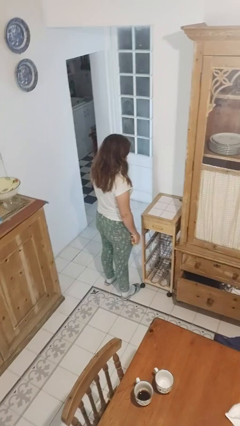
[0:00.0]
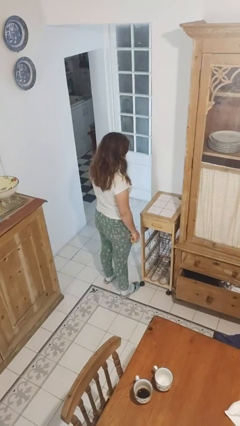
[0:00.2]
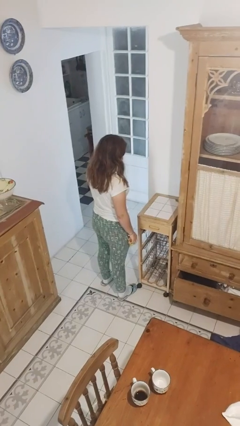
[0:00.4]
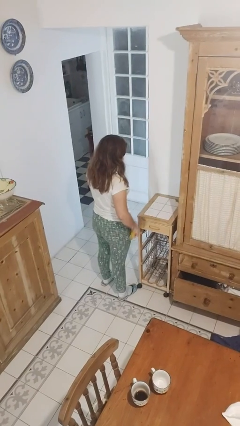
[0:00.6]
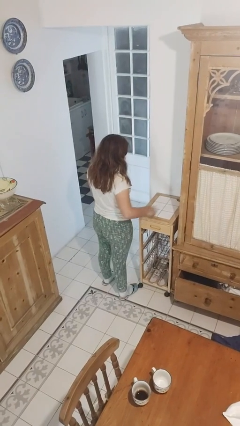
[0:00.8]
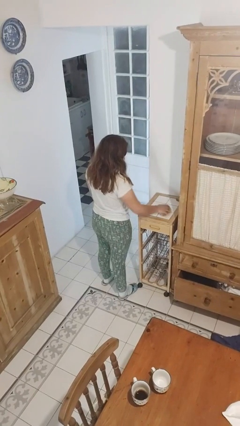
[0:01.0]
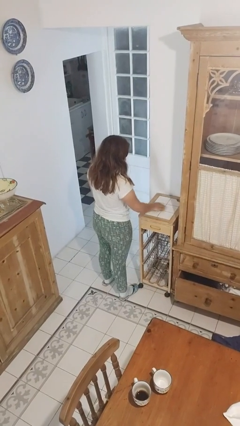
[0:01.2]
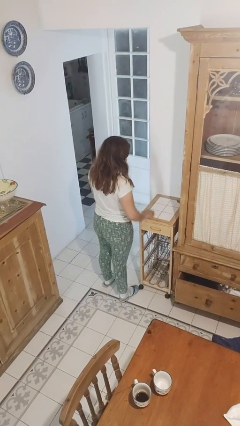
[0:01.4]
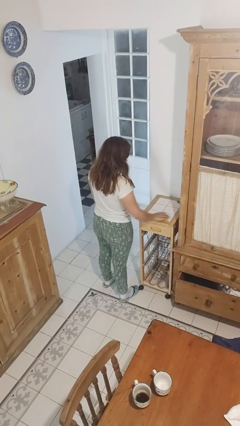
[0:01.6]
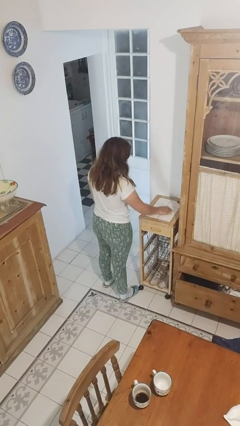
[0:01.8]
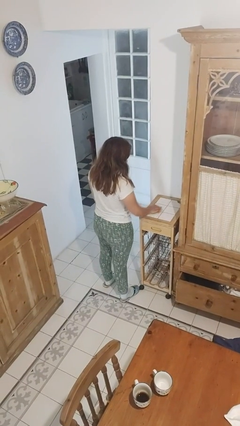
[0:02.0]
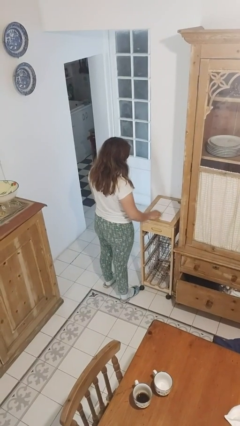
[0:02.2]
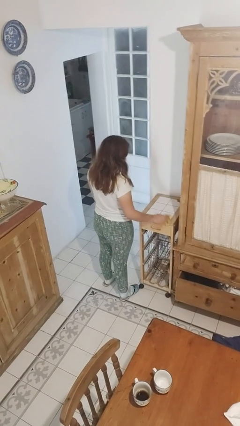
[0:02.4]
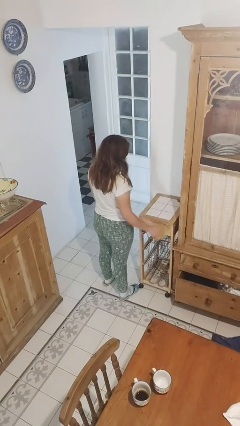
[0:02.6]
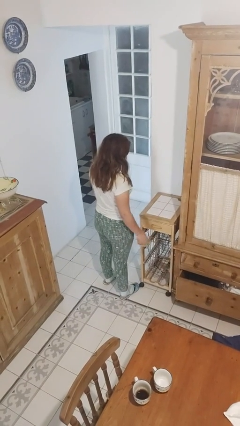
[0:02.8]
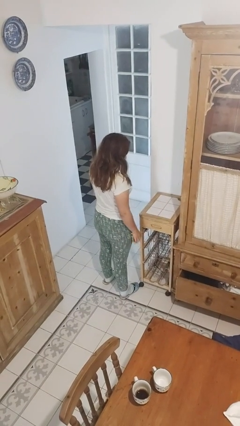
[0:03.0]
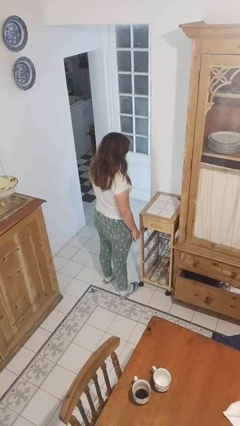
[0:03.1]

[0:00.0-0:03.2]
person cleans table with rag

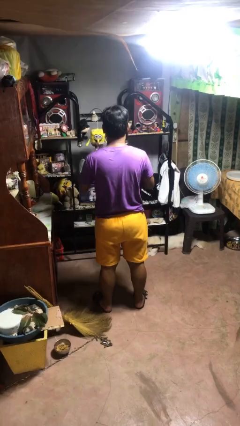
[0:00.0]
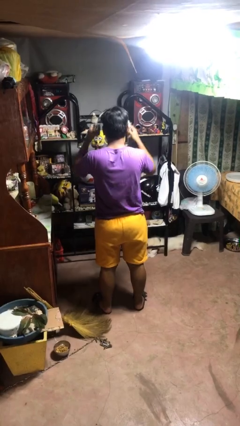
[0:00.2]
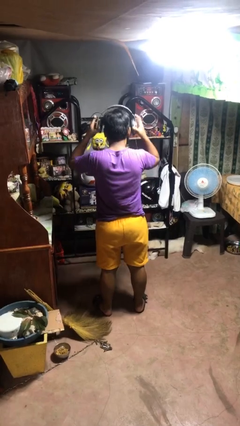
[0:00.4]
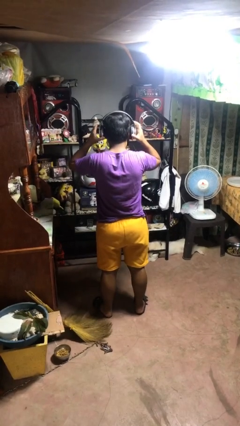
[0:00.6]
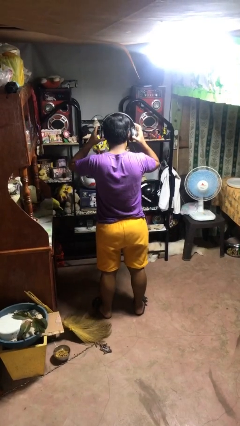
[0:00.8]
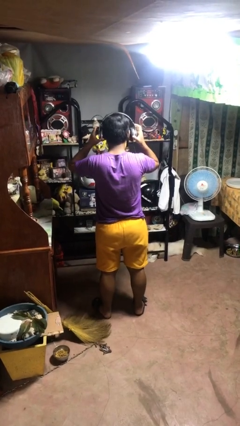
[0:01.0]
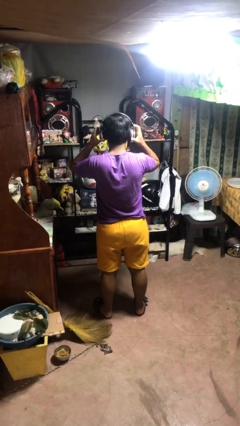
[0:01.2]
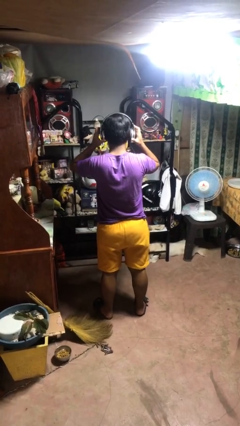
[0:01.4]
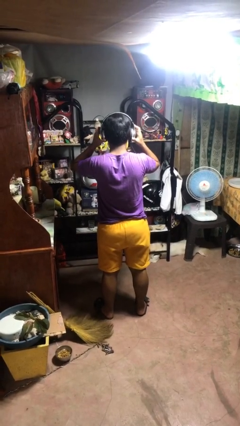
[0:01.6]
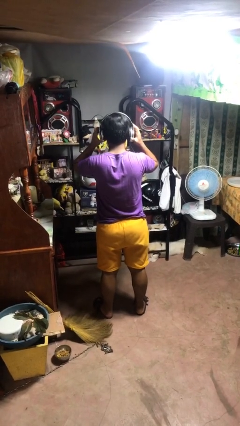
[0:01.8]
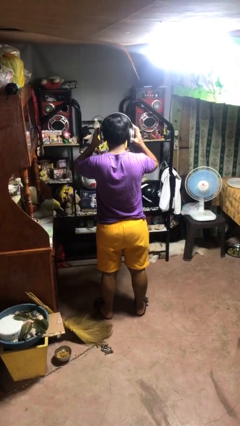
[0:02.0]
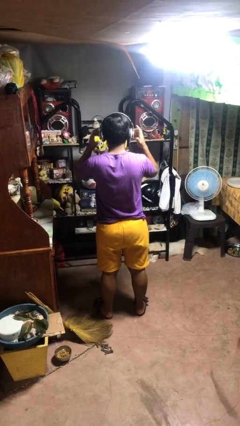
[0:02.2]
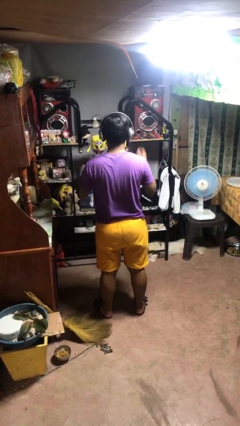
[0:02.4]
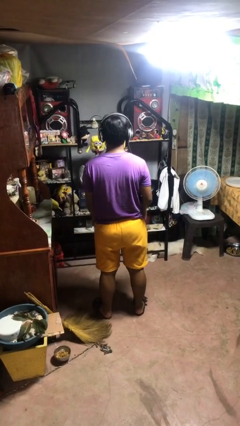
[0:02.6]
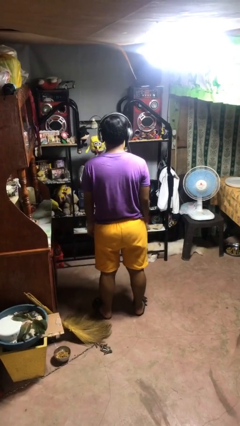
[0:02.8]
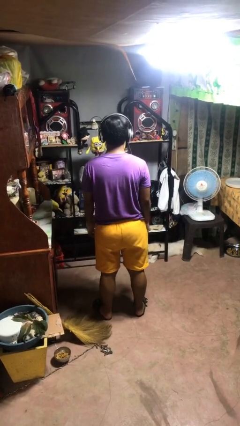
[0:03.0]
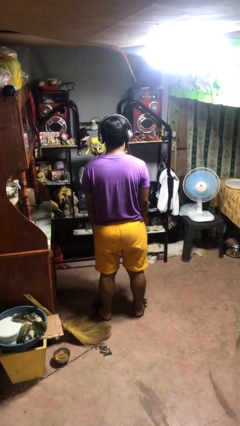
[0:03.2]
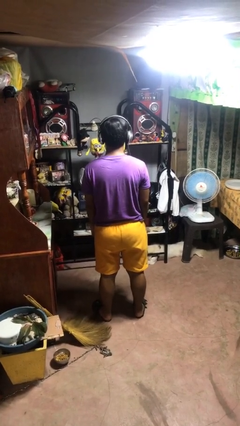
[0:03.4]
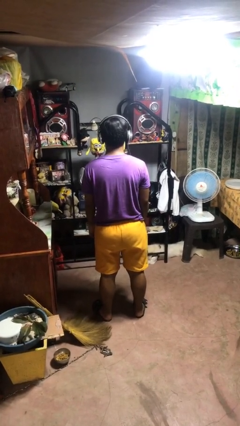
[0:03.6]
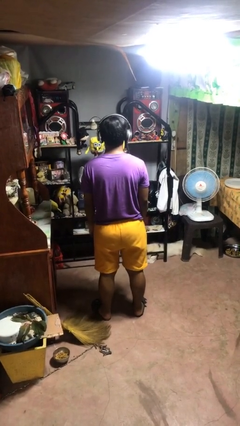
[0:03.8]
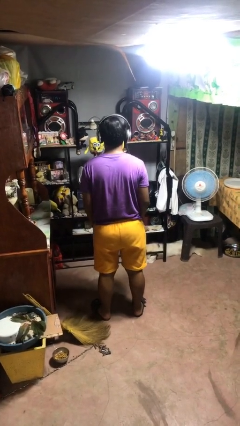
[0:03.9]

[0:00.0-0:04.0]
person puts on headphones

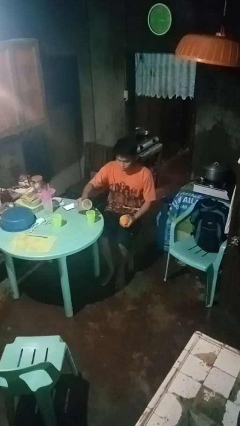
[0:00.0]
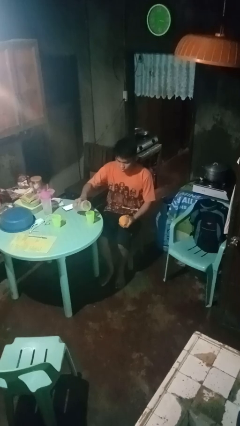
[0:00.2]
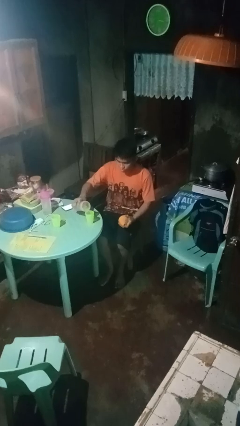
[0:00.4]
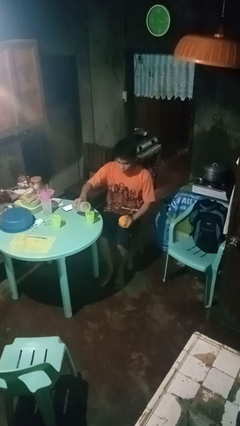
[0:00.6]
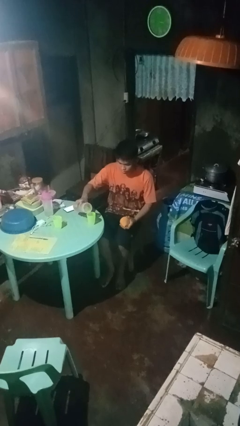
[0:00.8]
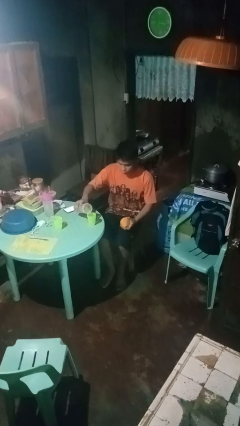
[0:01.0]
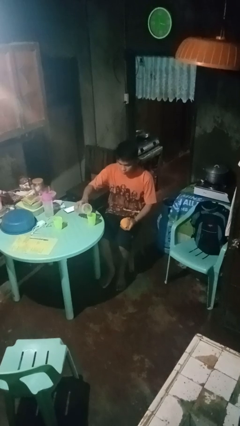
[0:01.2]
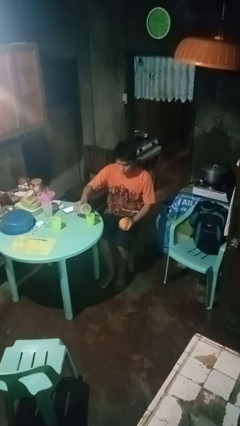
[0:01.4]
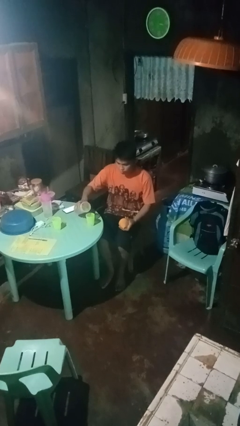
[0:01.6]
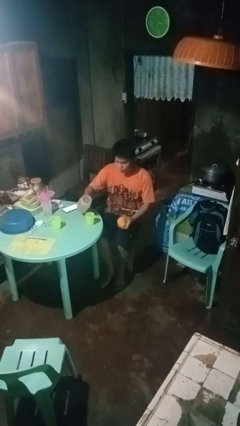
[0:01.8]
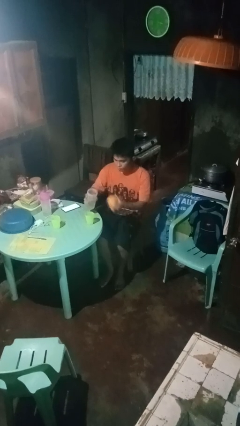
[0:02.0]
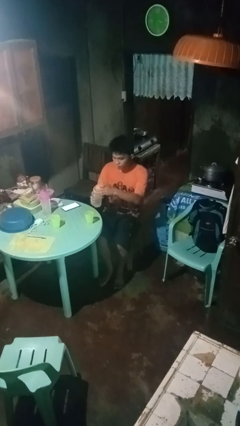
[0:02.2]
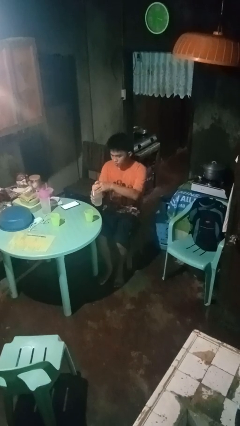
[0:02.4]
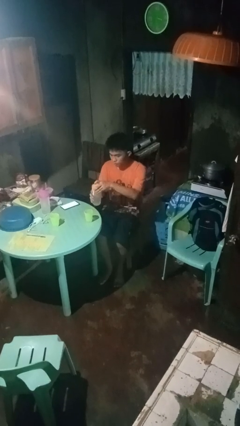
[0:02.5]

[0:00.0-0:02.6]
person pours liquid into cup

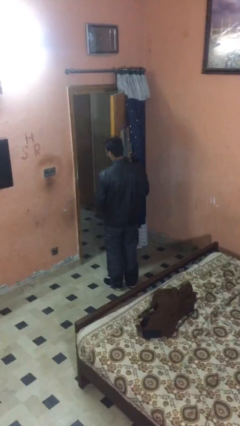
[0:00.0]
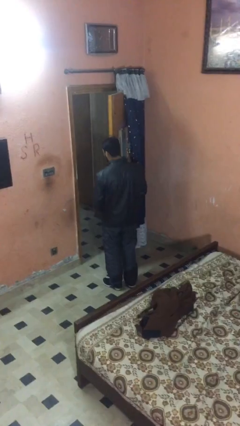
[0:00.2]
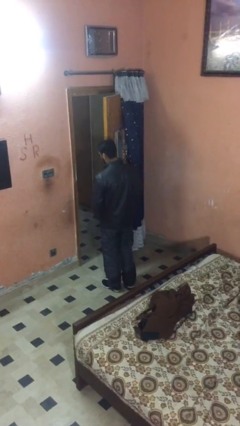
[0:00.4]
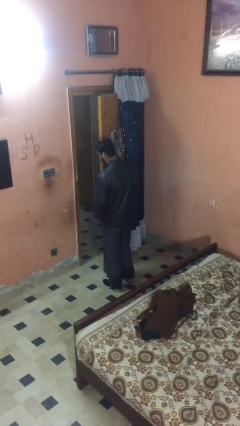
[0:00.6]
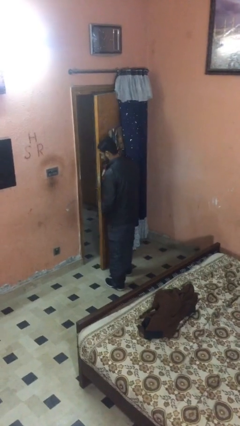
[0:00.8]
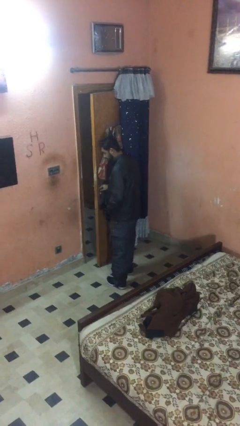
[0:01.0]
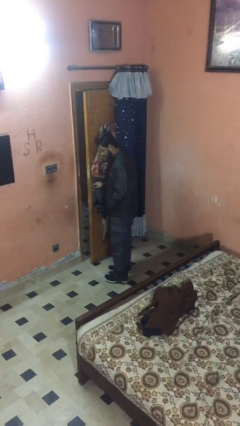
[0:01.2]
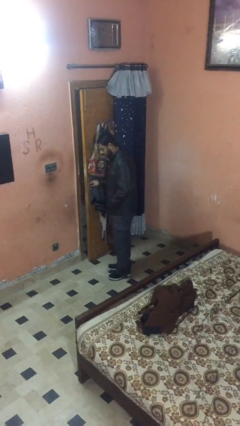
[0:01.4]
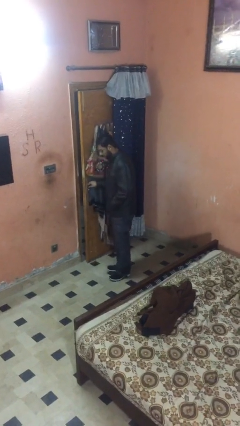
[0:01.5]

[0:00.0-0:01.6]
person closes facility door

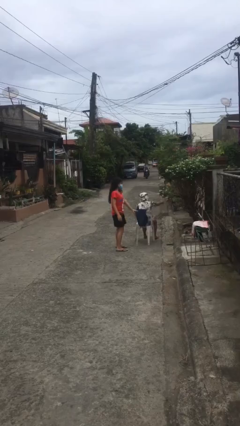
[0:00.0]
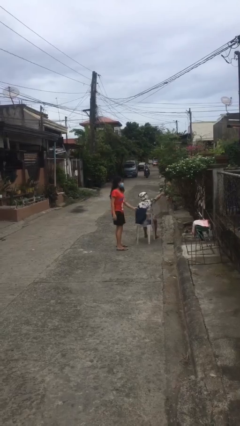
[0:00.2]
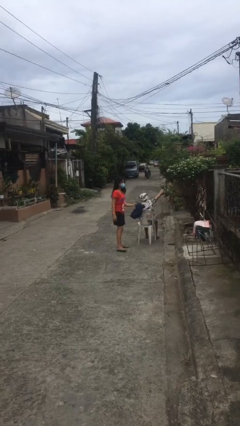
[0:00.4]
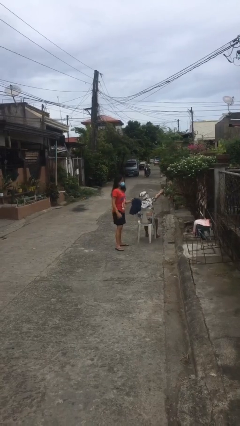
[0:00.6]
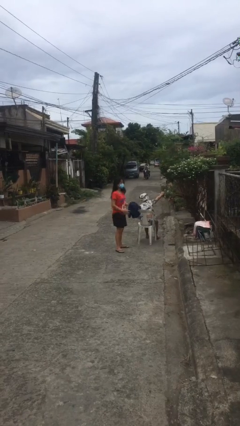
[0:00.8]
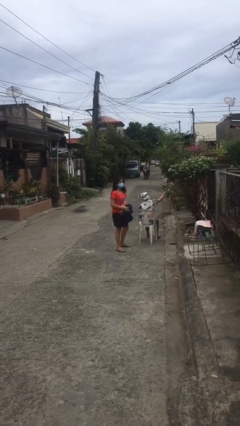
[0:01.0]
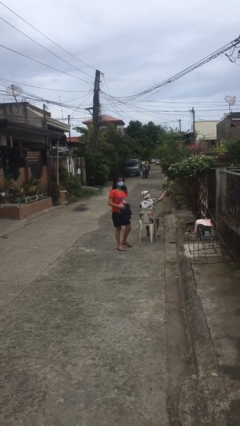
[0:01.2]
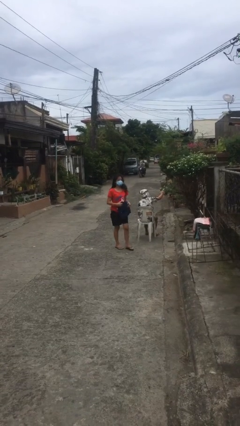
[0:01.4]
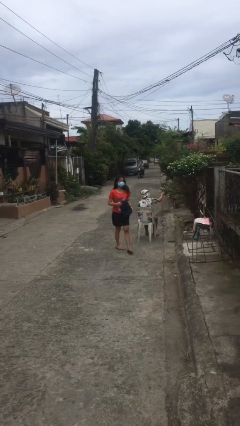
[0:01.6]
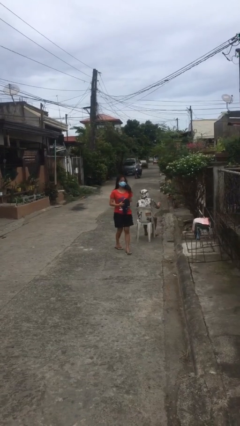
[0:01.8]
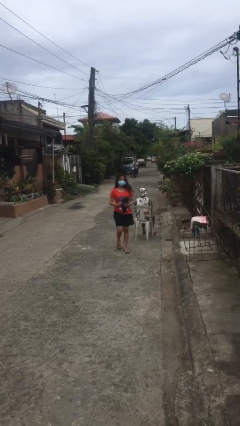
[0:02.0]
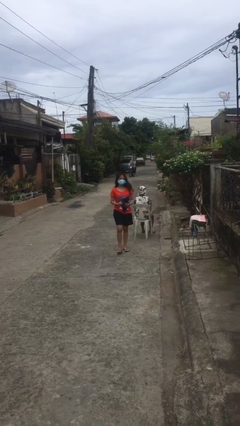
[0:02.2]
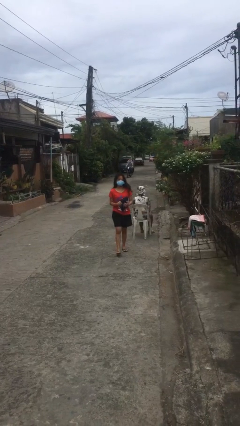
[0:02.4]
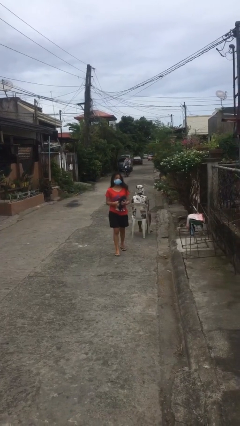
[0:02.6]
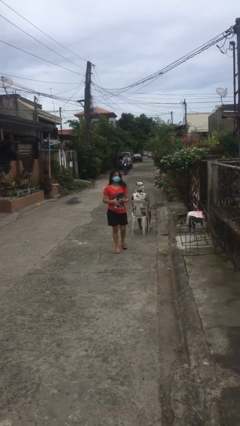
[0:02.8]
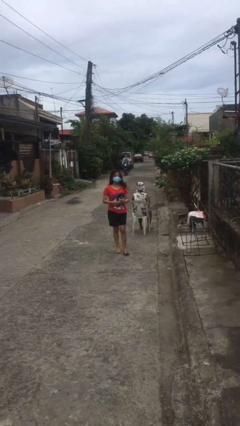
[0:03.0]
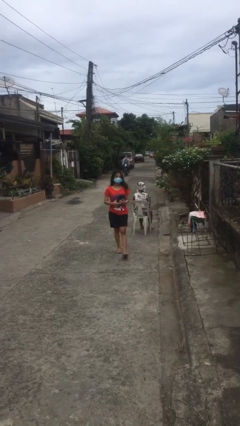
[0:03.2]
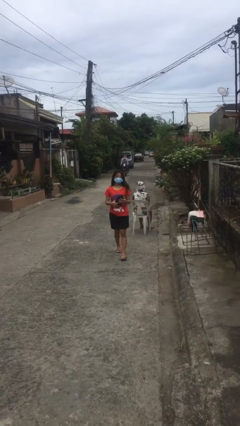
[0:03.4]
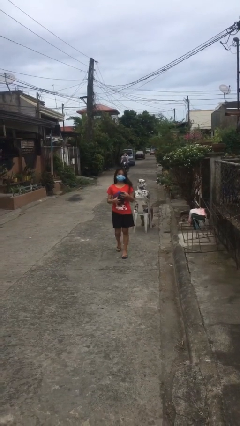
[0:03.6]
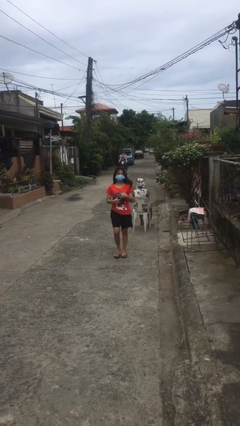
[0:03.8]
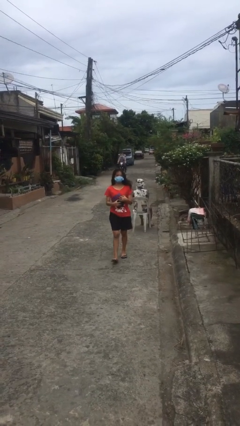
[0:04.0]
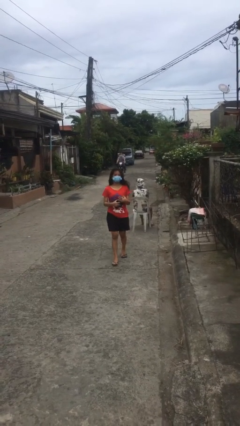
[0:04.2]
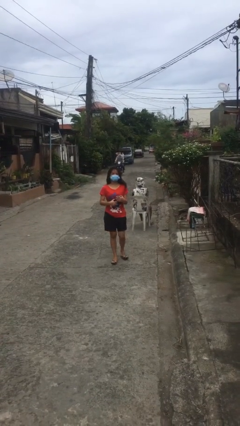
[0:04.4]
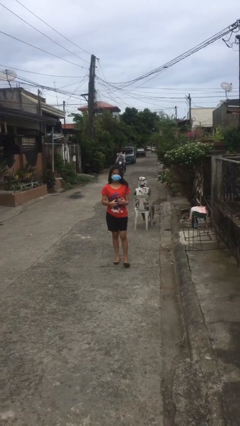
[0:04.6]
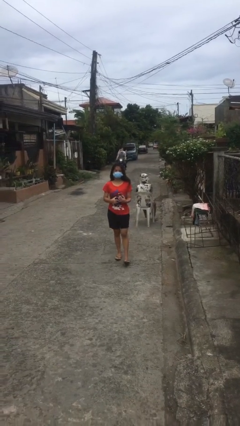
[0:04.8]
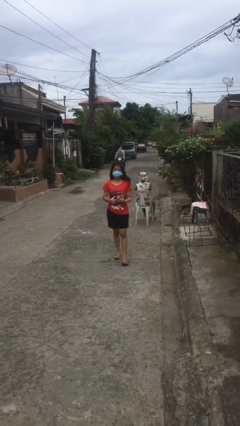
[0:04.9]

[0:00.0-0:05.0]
person steals object from person

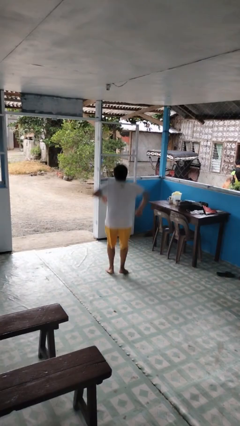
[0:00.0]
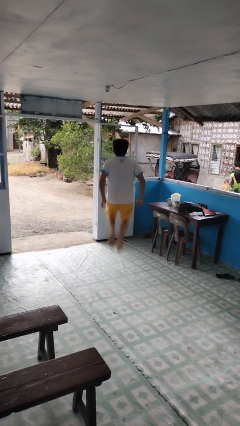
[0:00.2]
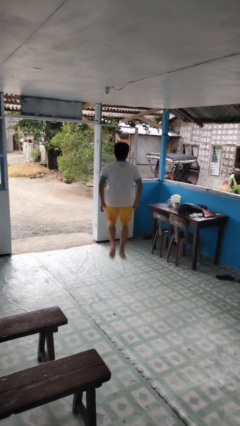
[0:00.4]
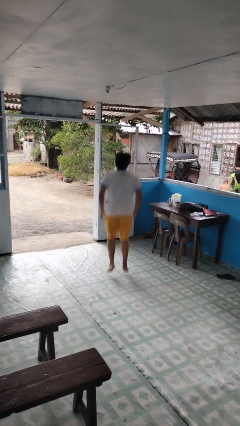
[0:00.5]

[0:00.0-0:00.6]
person jumps

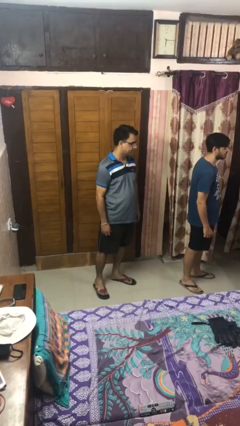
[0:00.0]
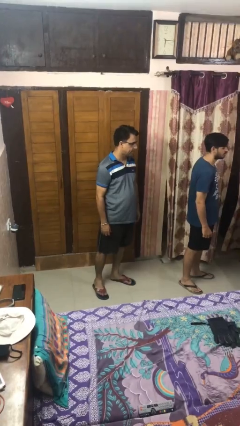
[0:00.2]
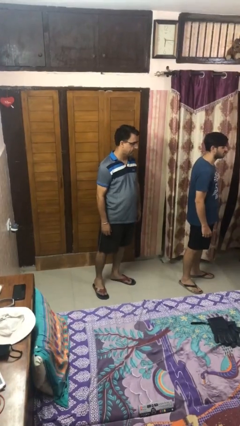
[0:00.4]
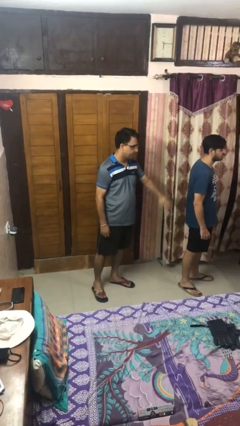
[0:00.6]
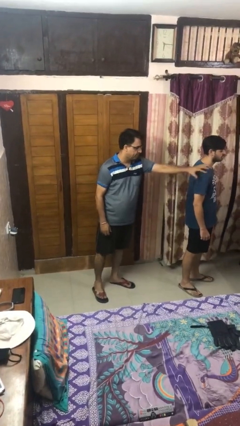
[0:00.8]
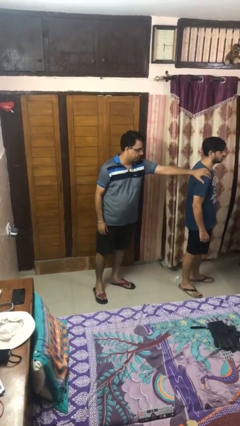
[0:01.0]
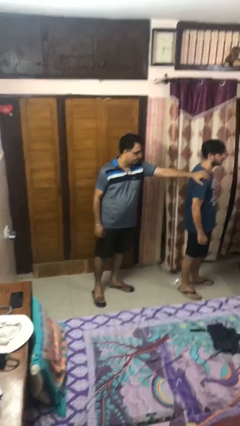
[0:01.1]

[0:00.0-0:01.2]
person grabs person by shoulder
